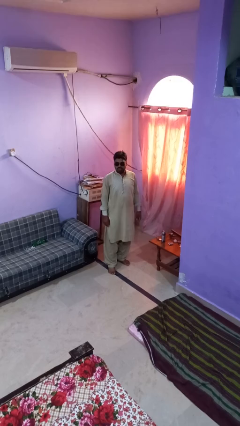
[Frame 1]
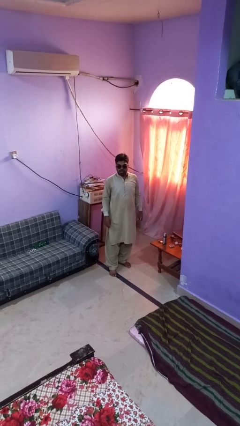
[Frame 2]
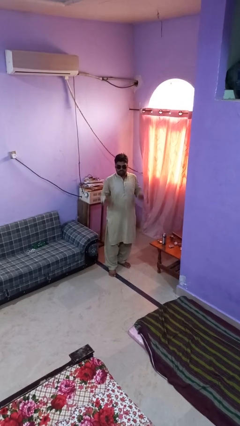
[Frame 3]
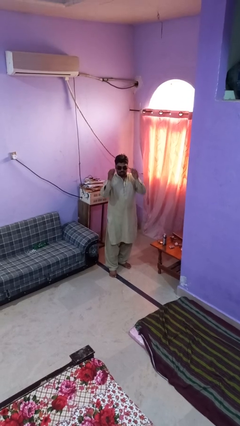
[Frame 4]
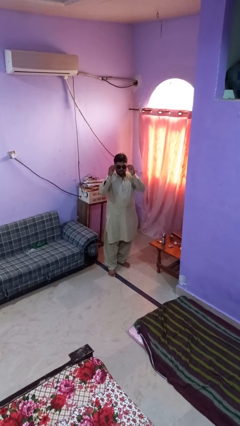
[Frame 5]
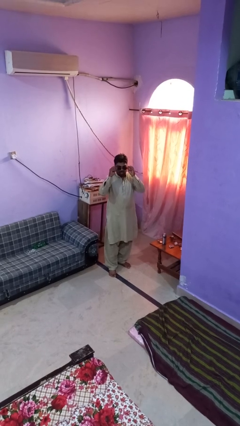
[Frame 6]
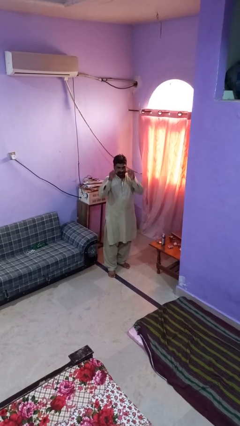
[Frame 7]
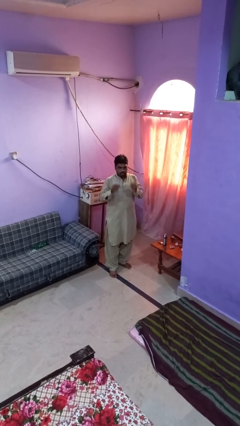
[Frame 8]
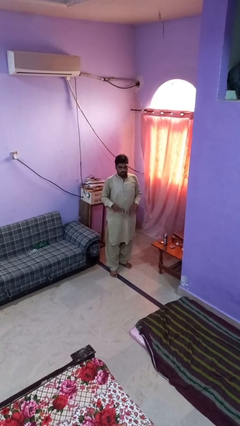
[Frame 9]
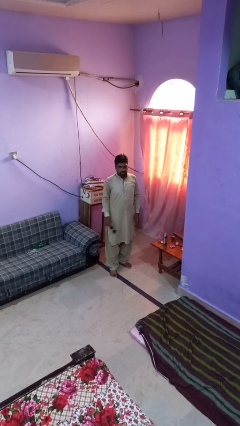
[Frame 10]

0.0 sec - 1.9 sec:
person takes off sunglasses

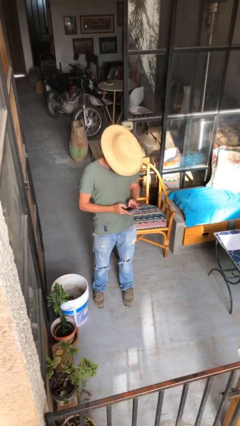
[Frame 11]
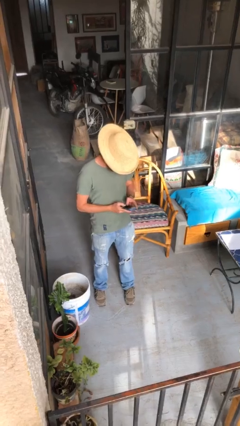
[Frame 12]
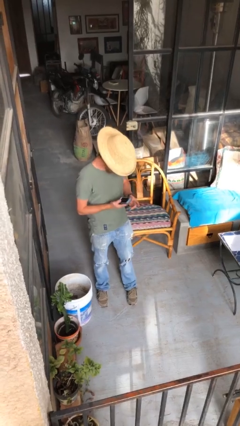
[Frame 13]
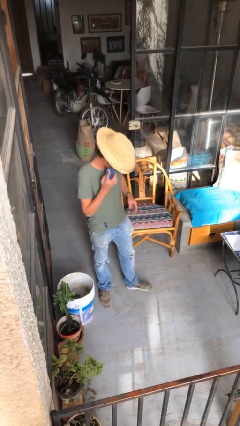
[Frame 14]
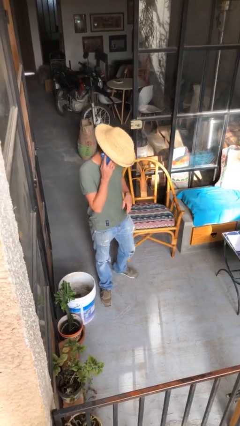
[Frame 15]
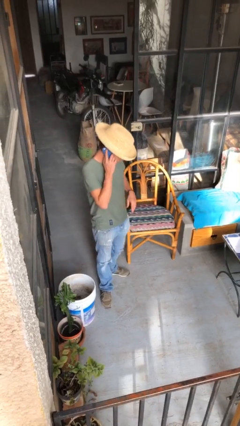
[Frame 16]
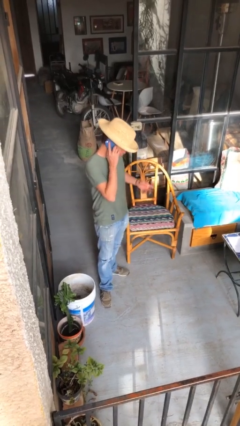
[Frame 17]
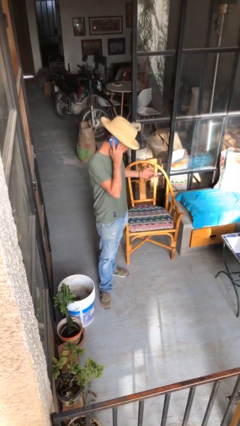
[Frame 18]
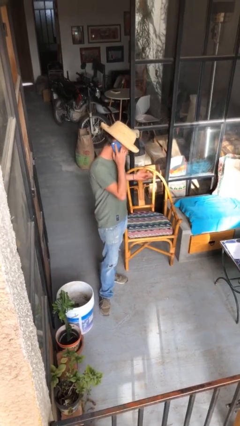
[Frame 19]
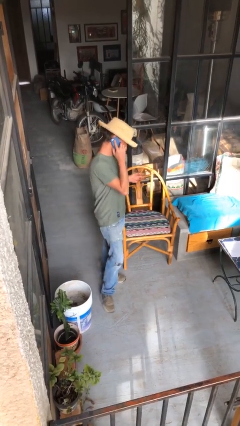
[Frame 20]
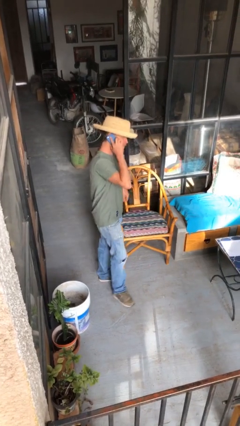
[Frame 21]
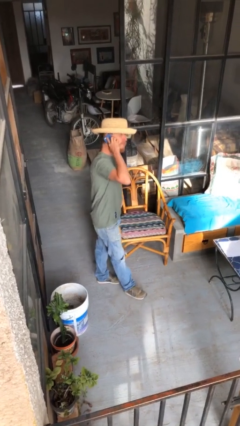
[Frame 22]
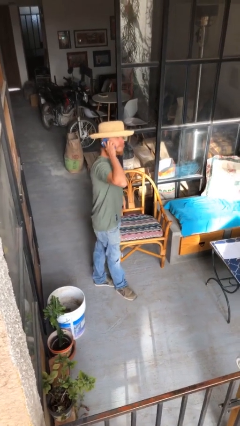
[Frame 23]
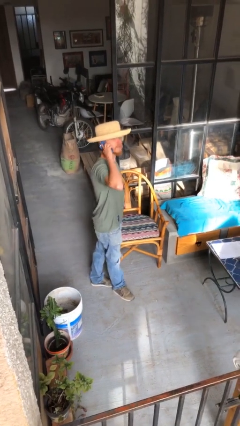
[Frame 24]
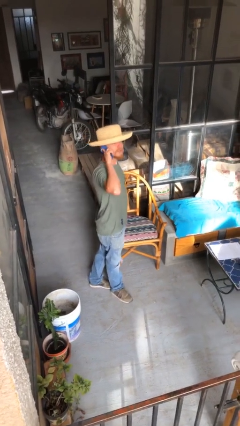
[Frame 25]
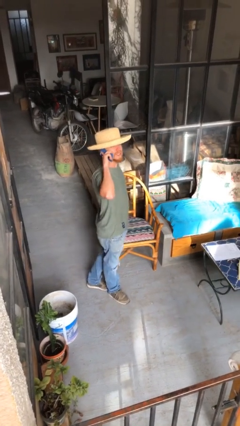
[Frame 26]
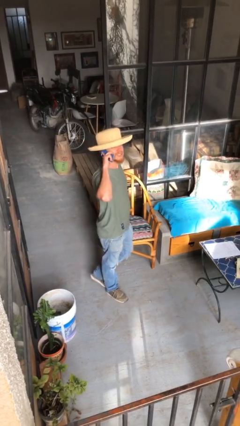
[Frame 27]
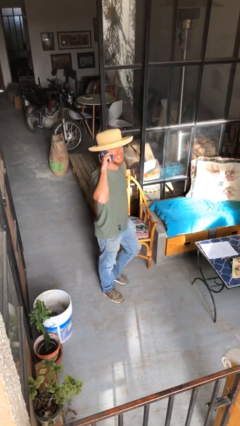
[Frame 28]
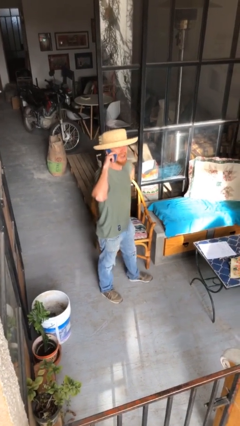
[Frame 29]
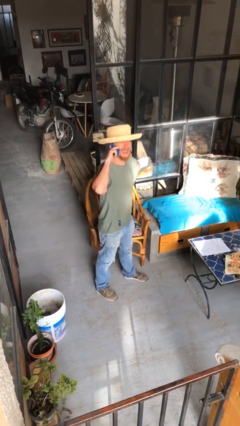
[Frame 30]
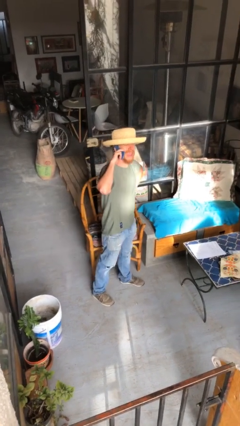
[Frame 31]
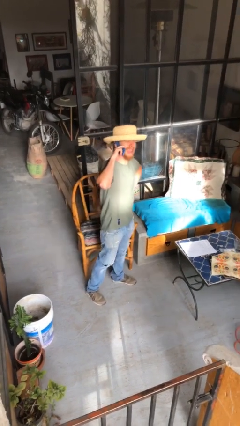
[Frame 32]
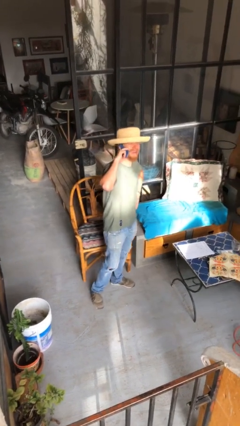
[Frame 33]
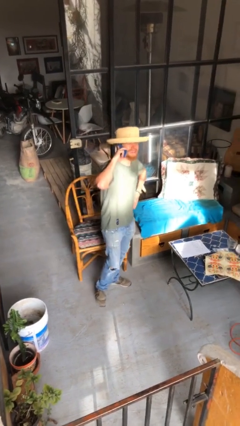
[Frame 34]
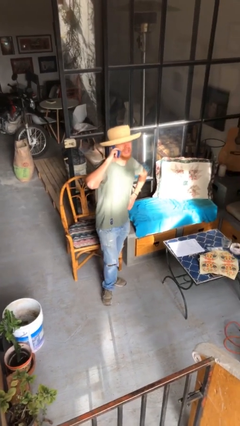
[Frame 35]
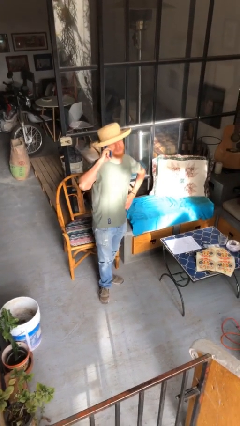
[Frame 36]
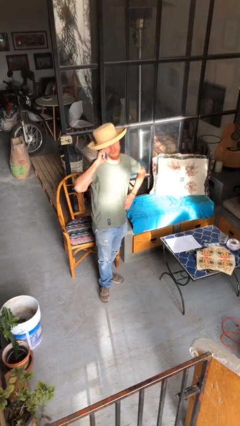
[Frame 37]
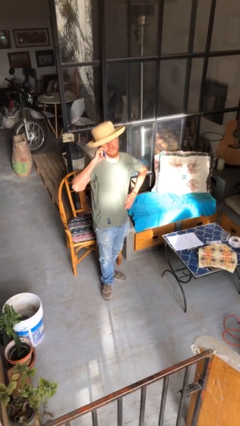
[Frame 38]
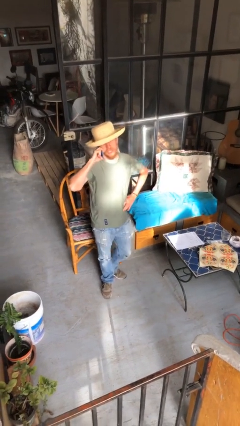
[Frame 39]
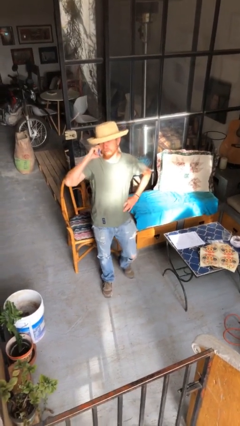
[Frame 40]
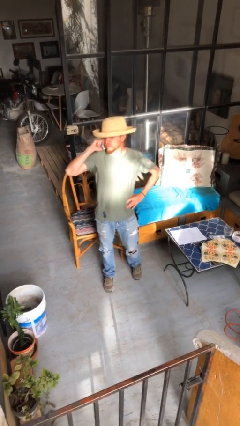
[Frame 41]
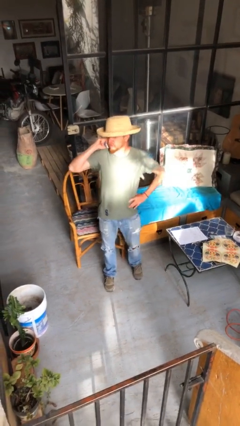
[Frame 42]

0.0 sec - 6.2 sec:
person talks on phone

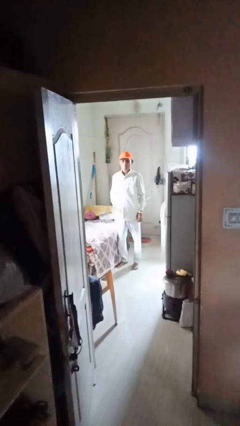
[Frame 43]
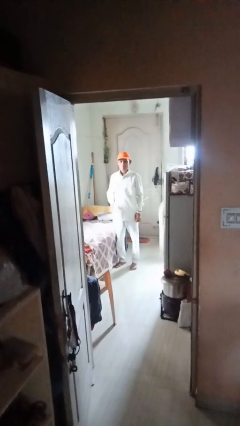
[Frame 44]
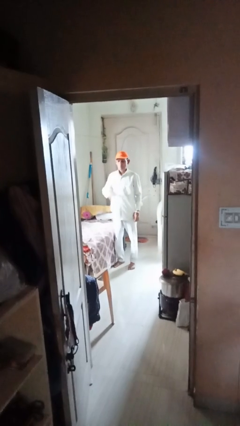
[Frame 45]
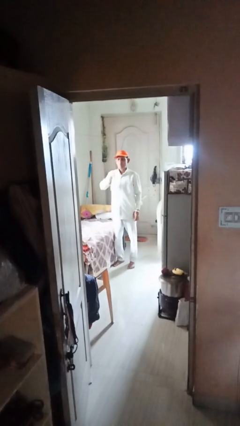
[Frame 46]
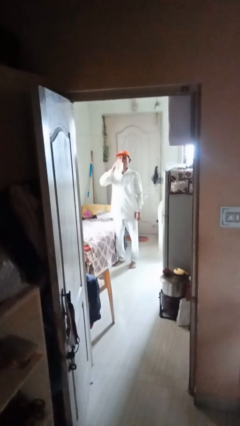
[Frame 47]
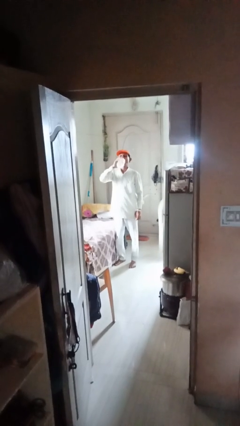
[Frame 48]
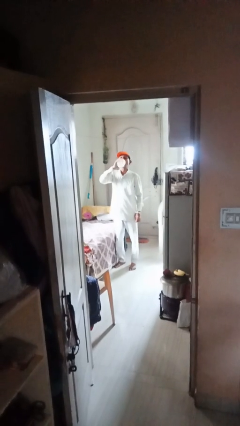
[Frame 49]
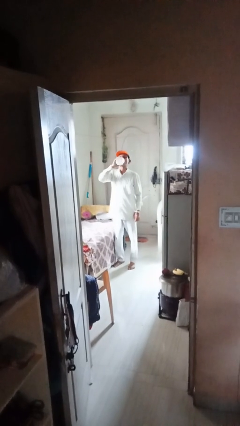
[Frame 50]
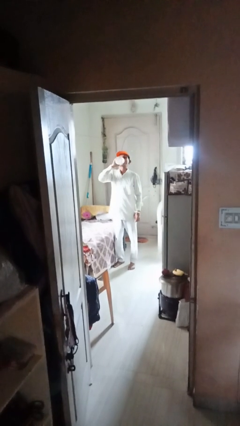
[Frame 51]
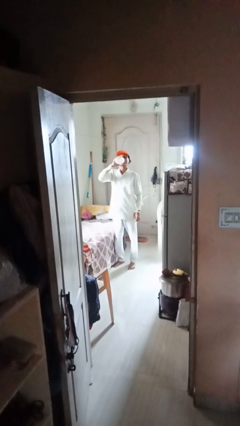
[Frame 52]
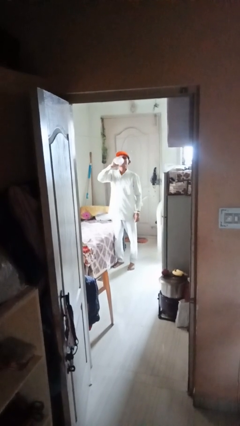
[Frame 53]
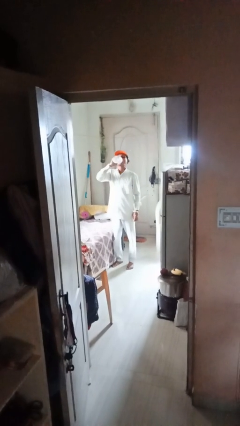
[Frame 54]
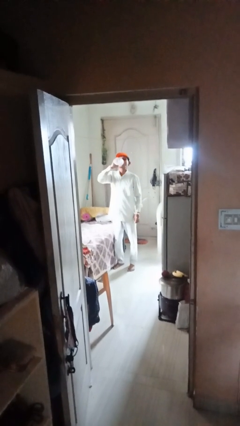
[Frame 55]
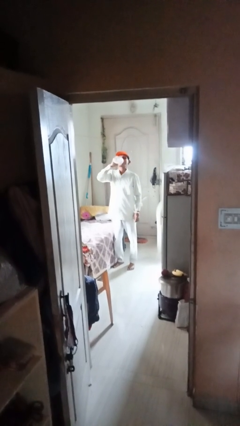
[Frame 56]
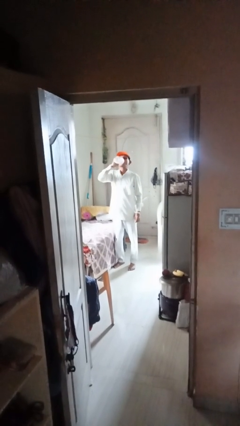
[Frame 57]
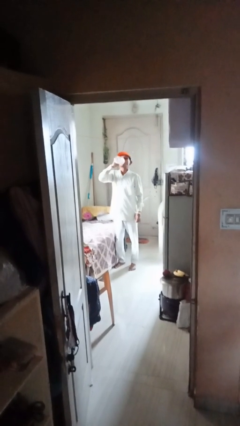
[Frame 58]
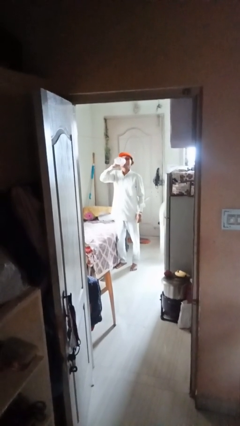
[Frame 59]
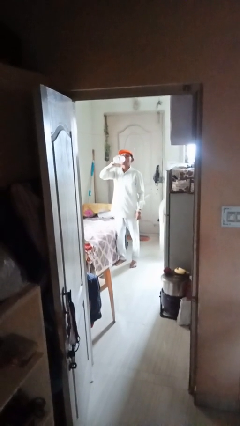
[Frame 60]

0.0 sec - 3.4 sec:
person drinks from bottle

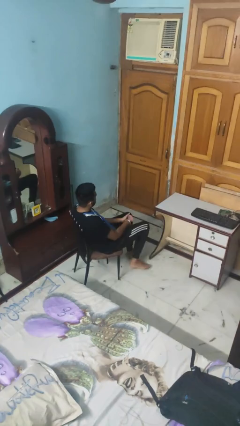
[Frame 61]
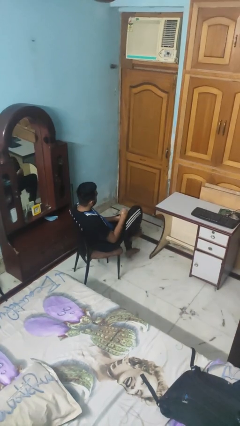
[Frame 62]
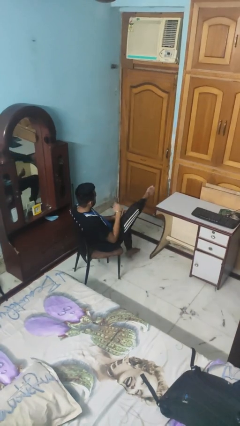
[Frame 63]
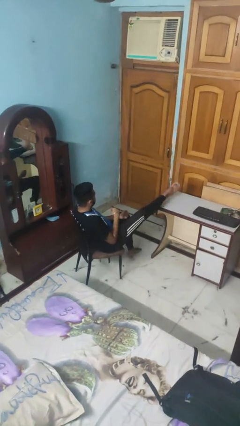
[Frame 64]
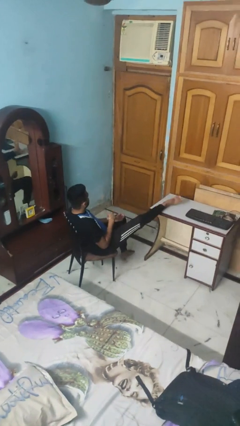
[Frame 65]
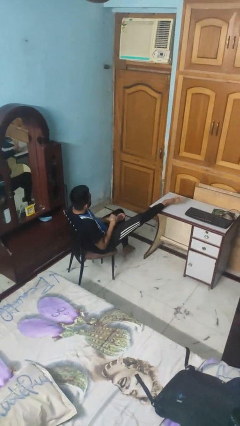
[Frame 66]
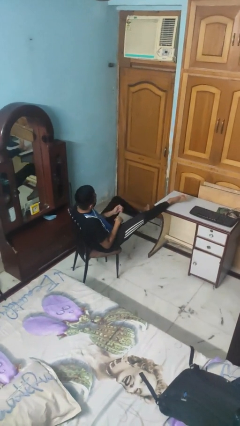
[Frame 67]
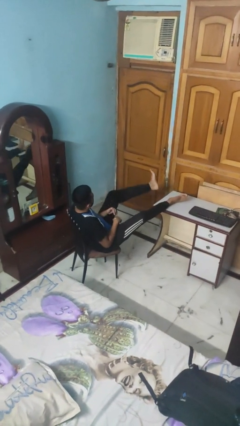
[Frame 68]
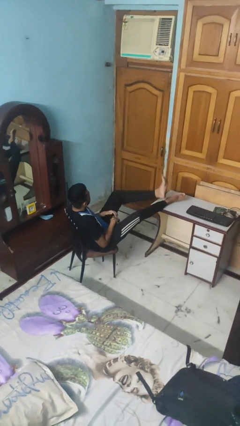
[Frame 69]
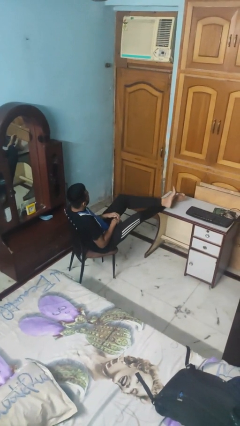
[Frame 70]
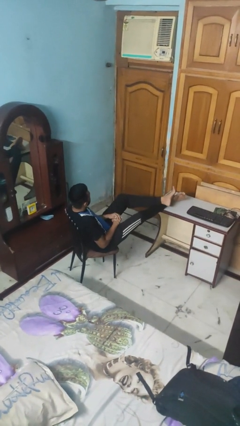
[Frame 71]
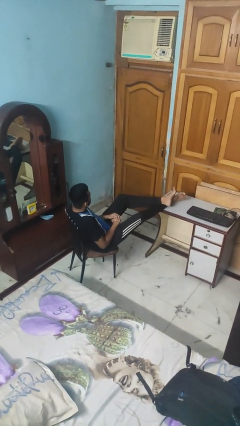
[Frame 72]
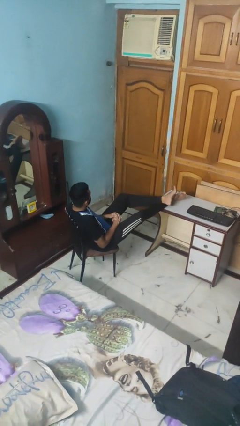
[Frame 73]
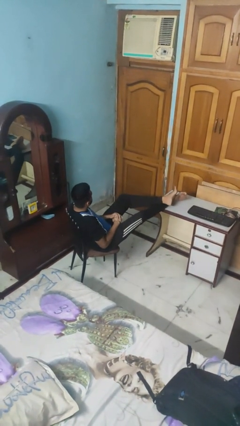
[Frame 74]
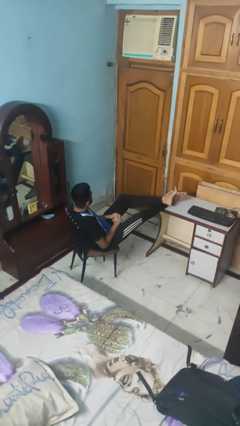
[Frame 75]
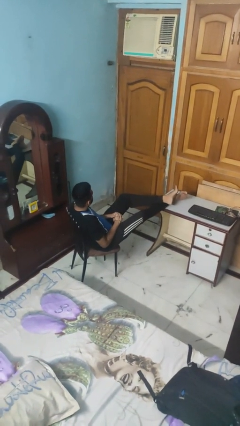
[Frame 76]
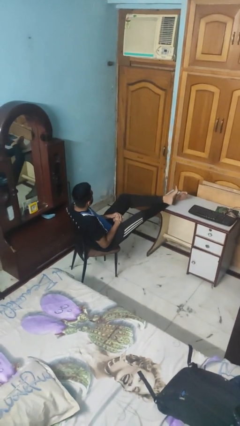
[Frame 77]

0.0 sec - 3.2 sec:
person puts feet up

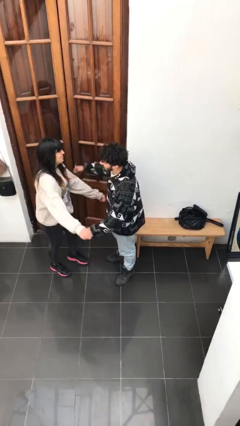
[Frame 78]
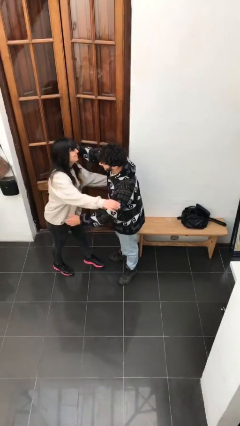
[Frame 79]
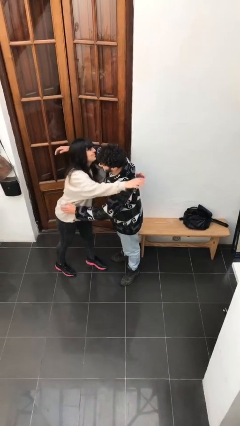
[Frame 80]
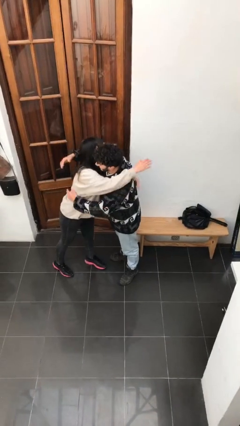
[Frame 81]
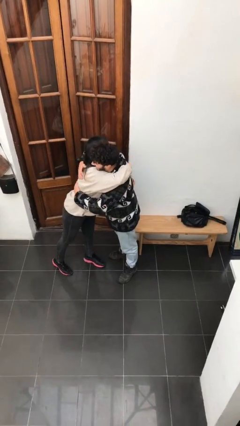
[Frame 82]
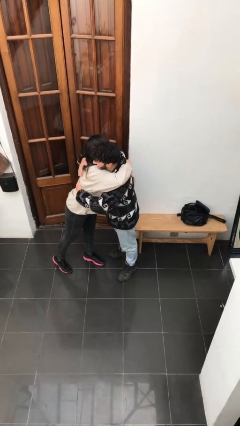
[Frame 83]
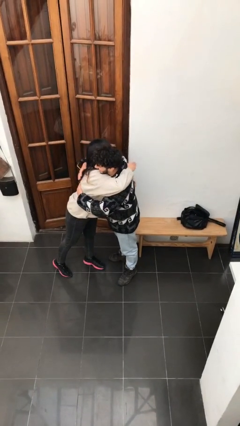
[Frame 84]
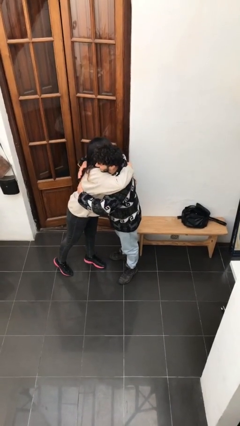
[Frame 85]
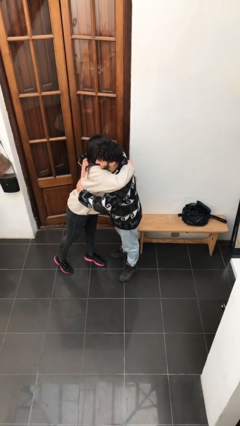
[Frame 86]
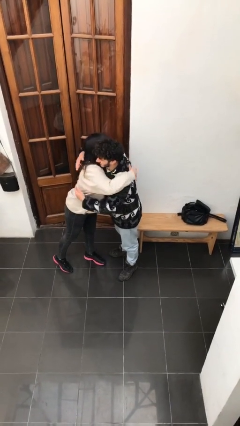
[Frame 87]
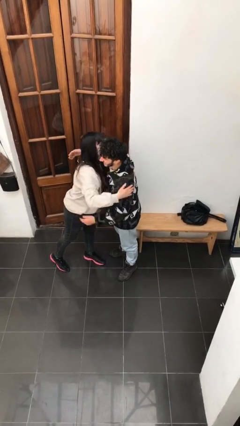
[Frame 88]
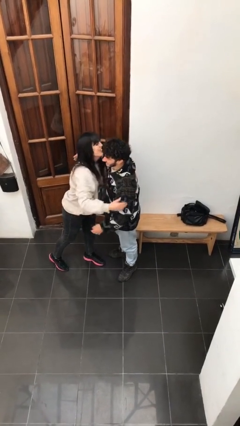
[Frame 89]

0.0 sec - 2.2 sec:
person embraces person

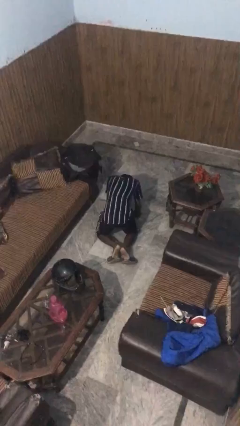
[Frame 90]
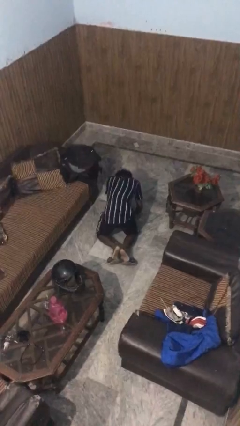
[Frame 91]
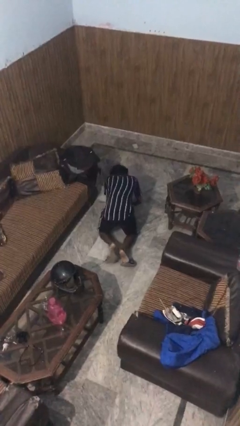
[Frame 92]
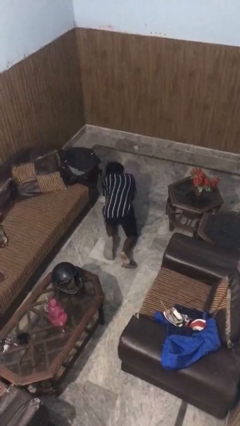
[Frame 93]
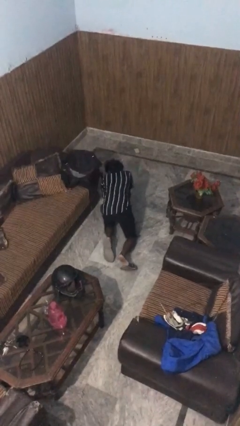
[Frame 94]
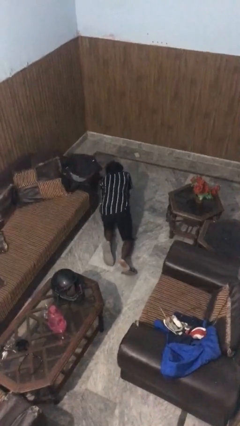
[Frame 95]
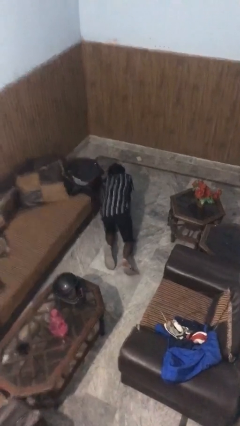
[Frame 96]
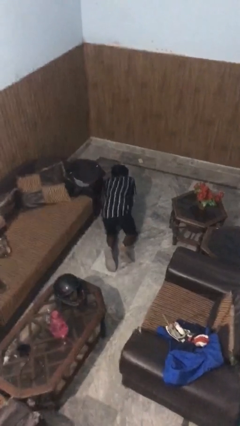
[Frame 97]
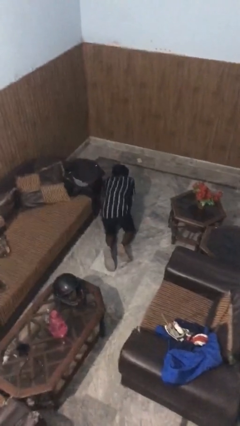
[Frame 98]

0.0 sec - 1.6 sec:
person crawls
